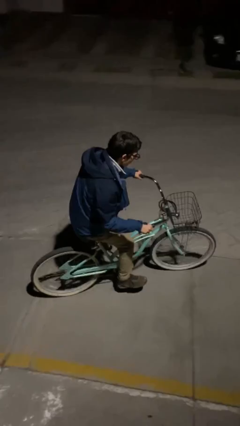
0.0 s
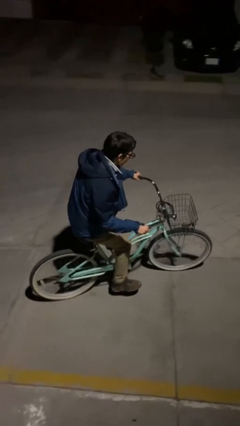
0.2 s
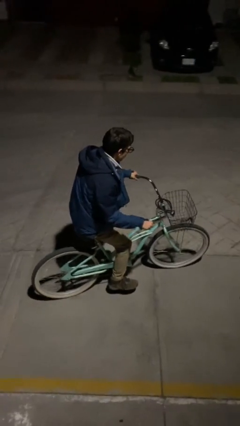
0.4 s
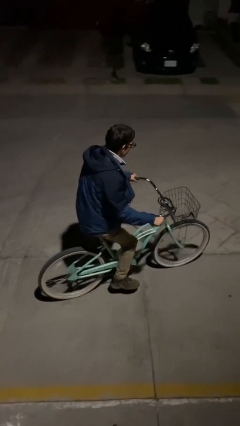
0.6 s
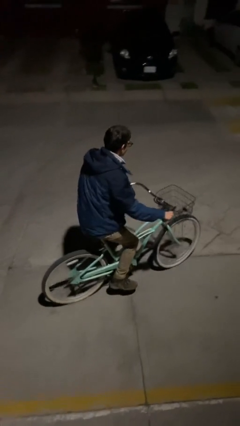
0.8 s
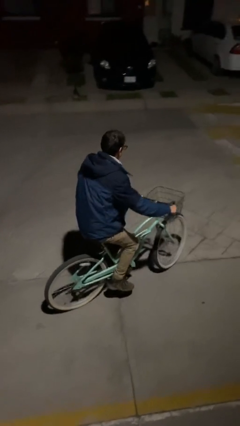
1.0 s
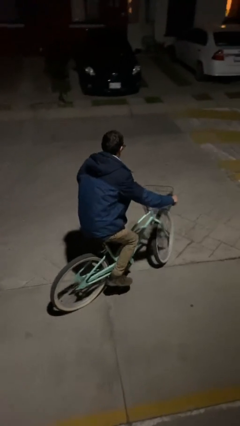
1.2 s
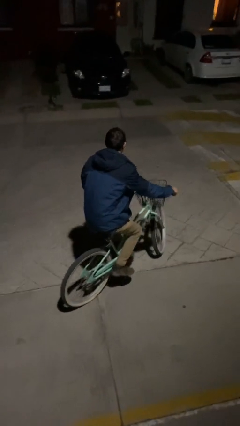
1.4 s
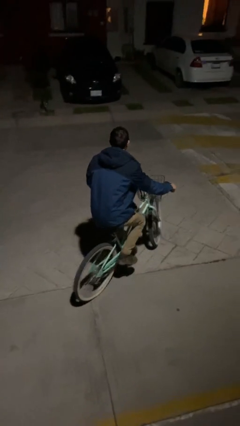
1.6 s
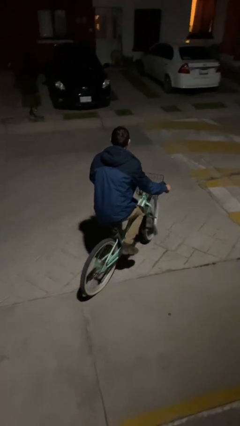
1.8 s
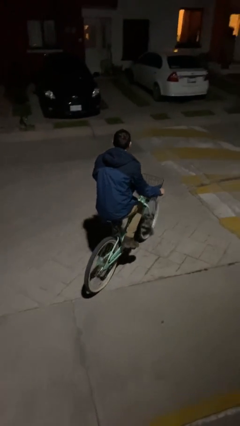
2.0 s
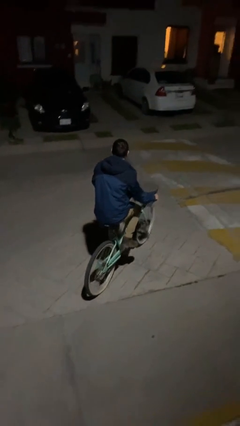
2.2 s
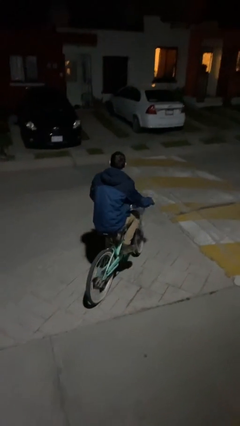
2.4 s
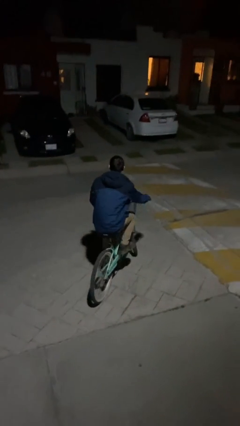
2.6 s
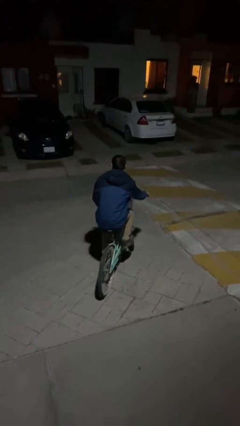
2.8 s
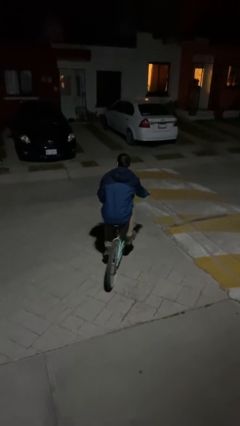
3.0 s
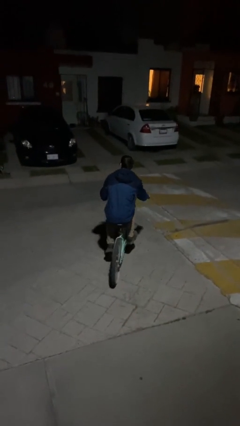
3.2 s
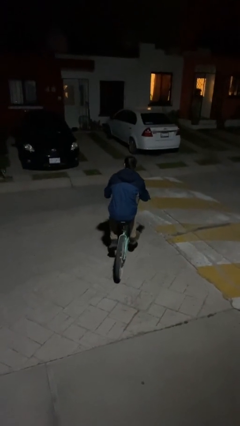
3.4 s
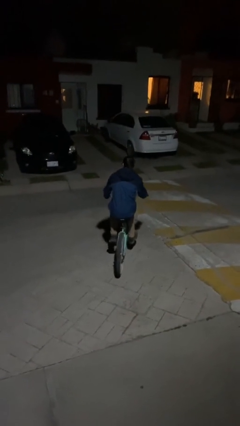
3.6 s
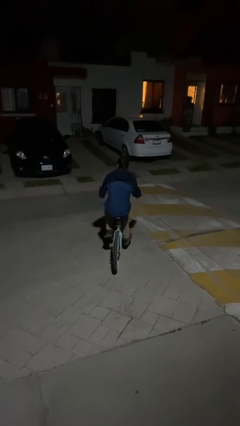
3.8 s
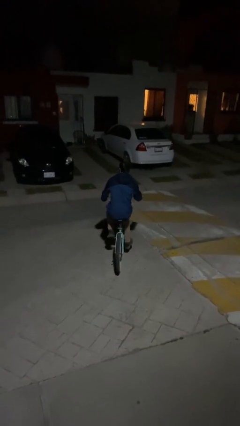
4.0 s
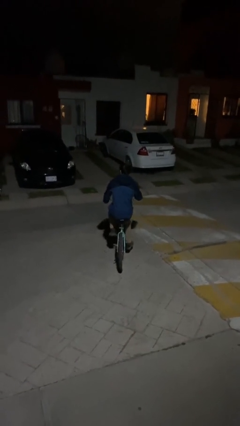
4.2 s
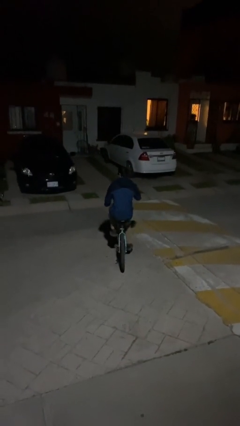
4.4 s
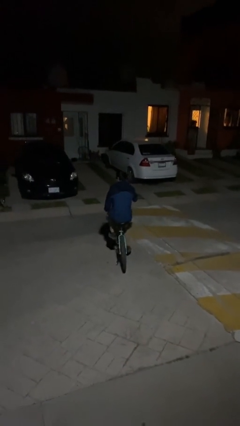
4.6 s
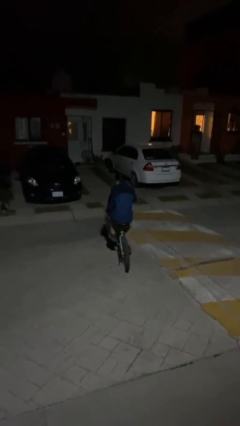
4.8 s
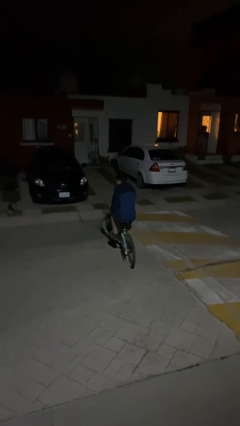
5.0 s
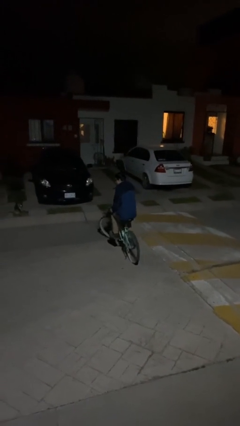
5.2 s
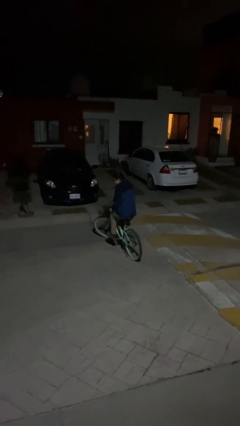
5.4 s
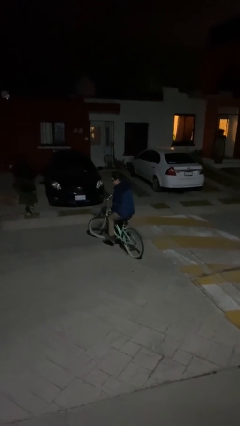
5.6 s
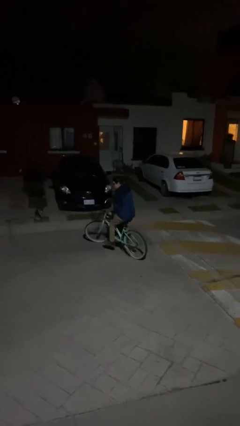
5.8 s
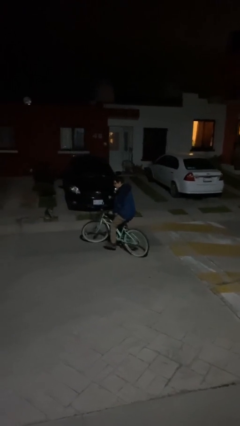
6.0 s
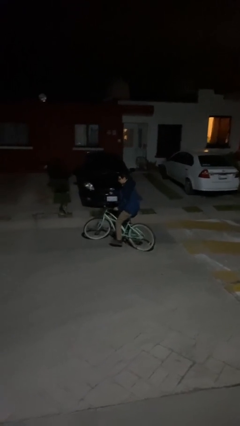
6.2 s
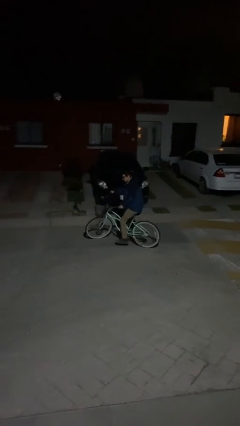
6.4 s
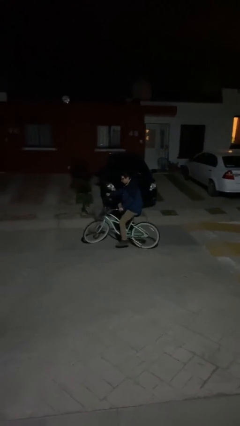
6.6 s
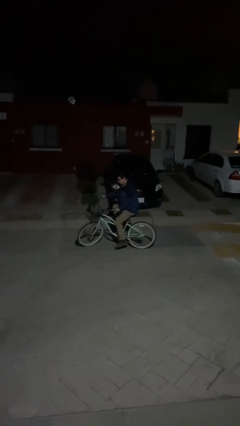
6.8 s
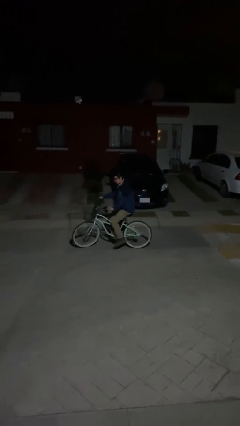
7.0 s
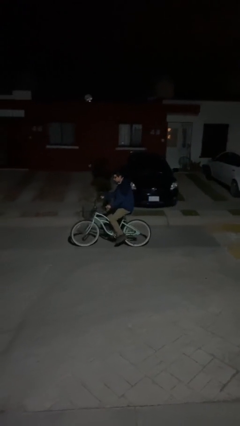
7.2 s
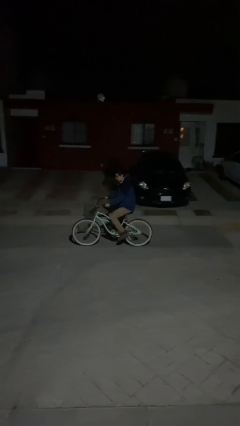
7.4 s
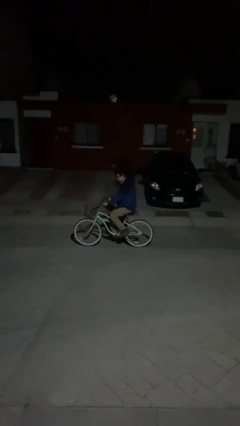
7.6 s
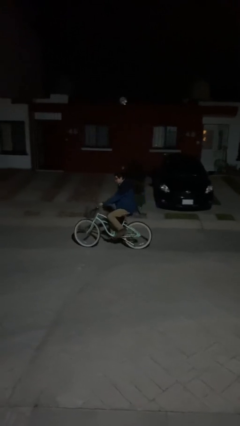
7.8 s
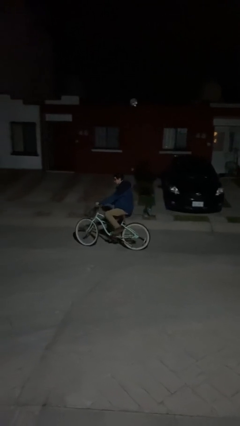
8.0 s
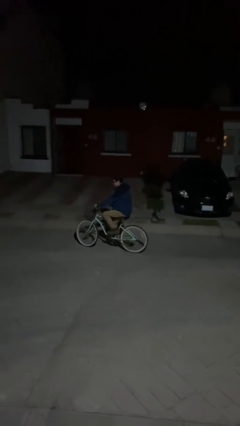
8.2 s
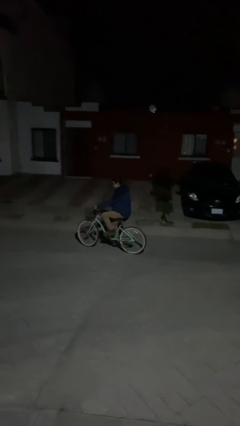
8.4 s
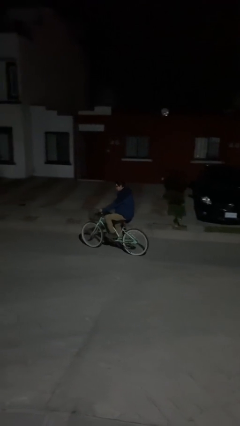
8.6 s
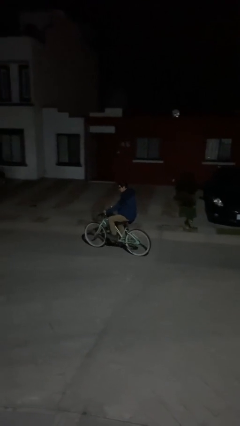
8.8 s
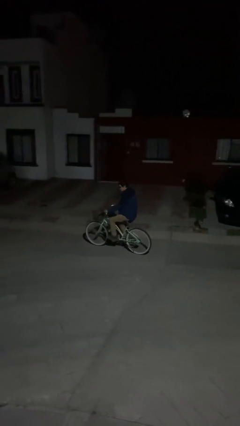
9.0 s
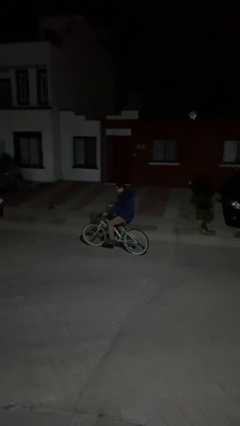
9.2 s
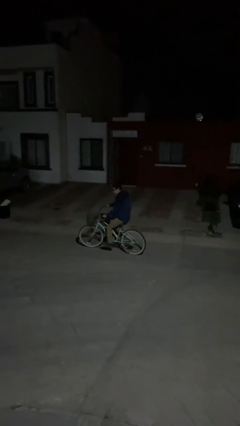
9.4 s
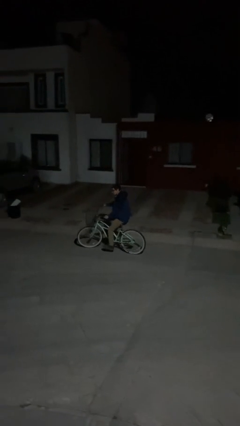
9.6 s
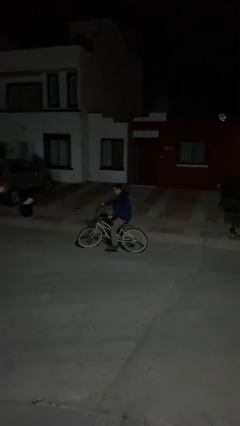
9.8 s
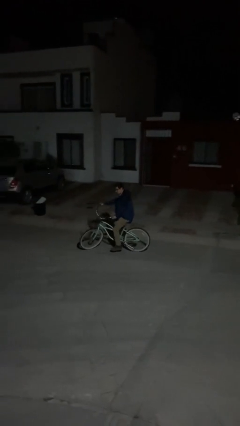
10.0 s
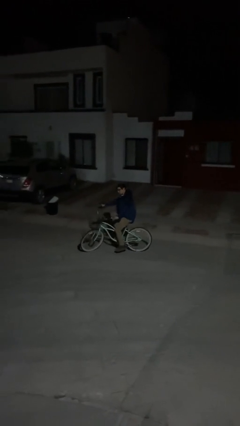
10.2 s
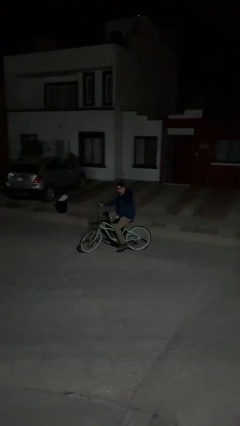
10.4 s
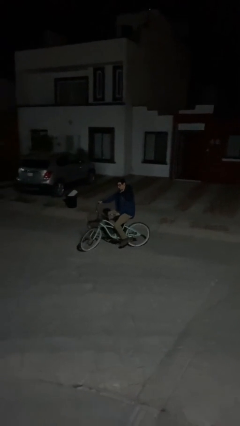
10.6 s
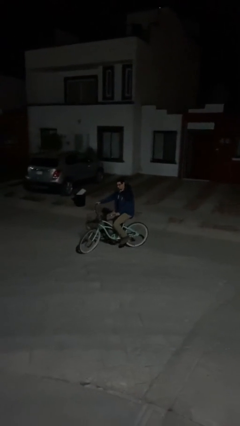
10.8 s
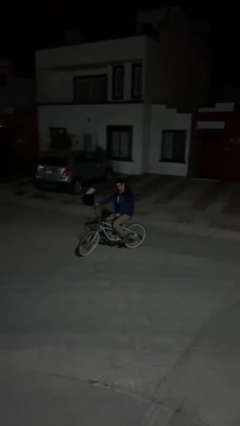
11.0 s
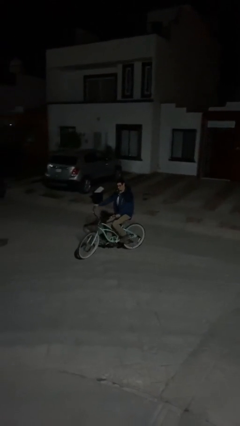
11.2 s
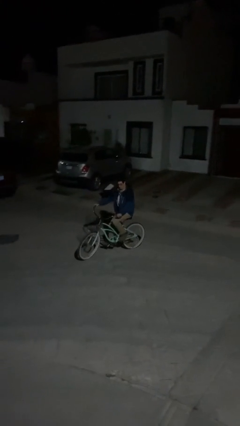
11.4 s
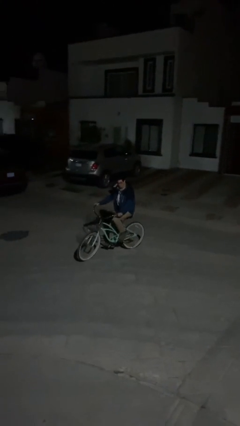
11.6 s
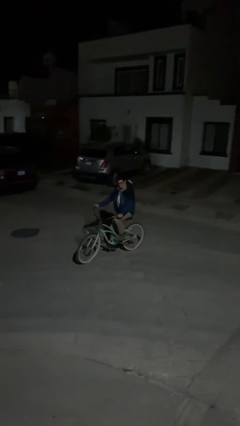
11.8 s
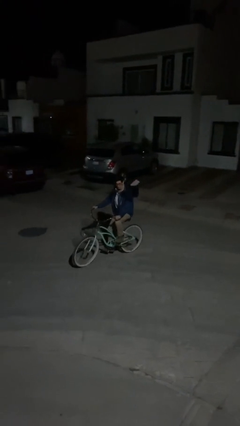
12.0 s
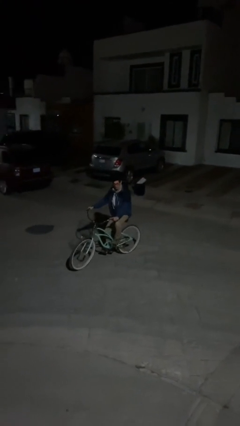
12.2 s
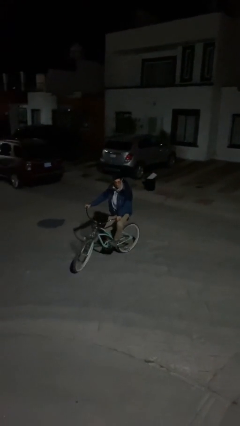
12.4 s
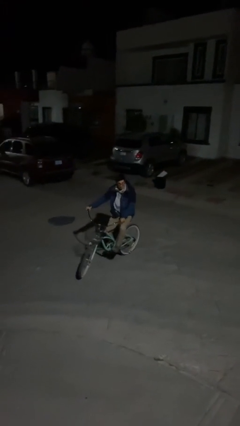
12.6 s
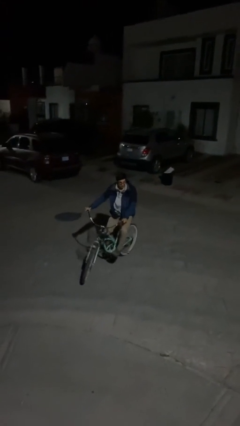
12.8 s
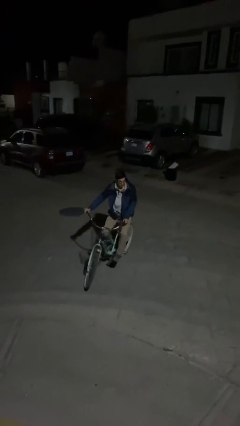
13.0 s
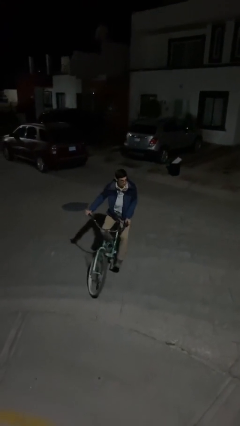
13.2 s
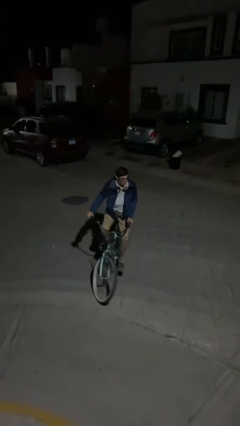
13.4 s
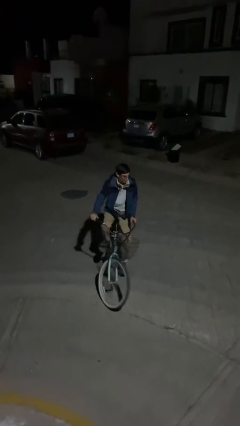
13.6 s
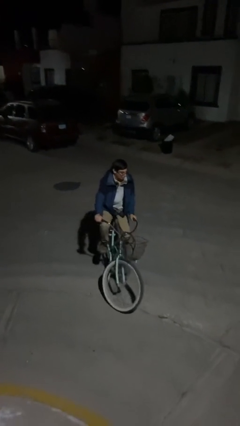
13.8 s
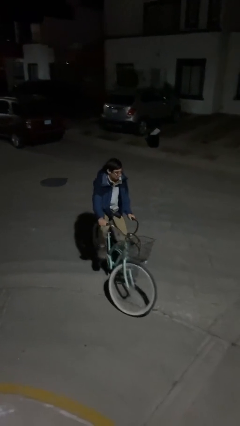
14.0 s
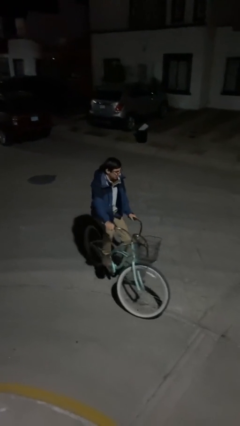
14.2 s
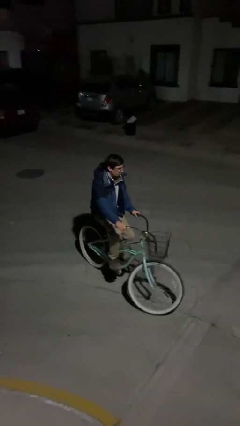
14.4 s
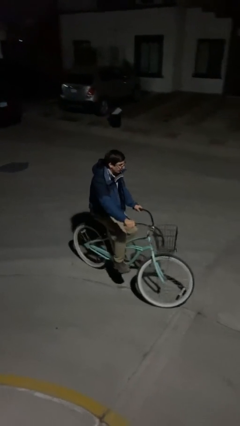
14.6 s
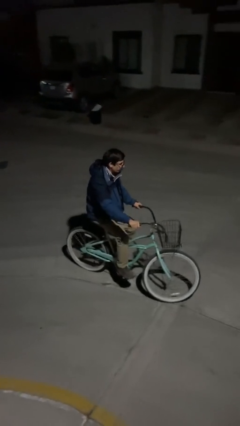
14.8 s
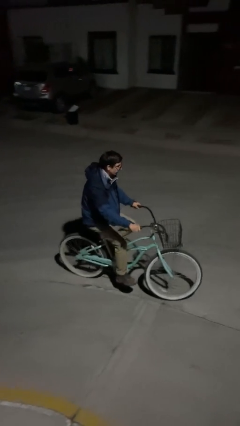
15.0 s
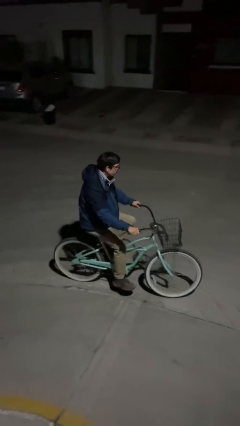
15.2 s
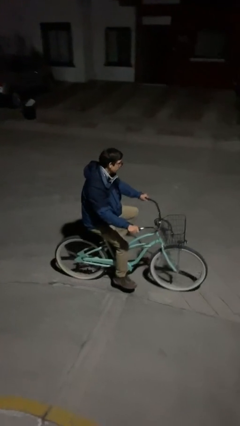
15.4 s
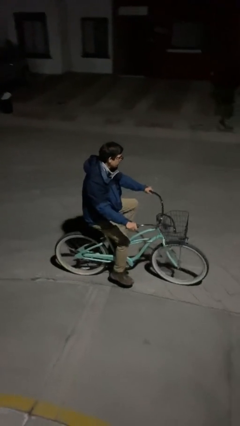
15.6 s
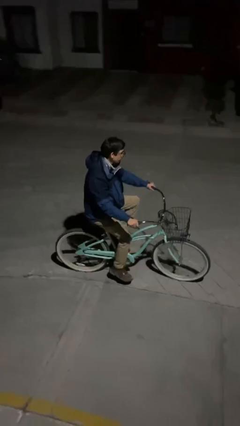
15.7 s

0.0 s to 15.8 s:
person rides bicycle

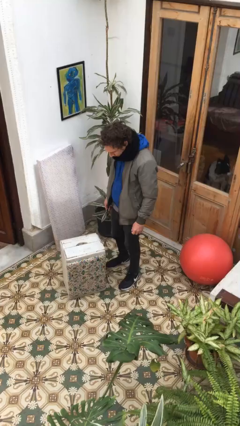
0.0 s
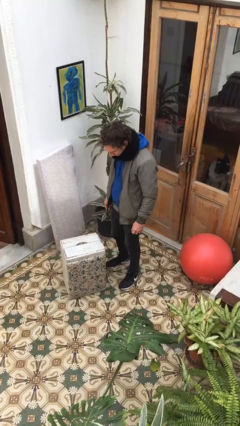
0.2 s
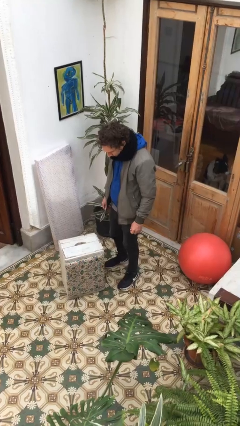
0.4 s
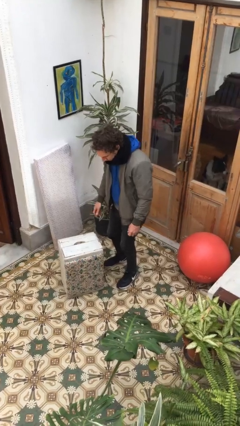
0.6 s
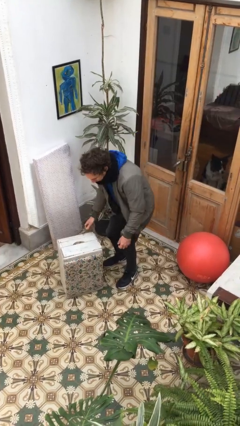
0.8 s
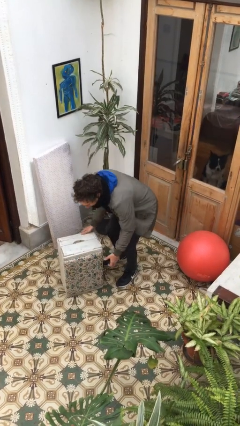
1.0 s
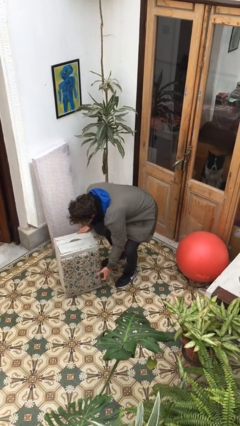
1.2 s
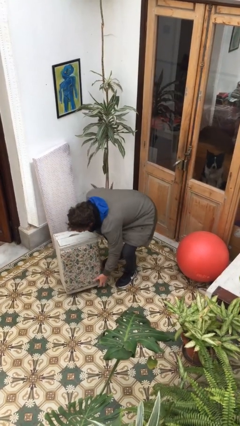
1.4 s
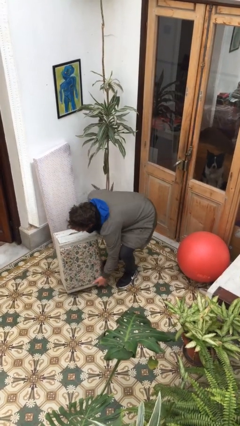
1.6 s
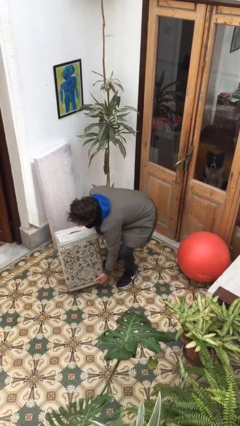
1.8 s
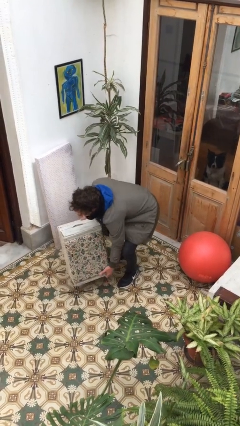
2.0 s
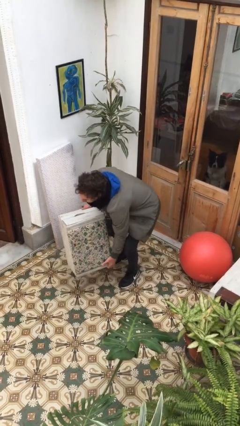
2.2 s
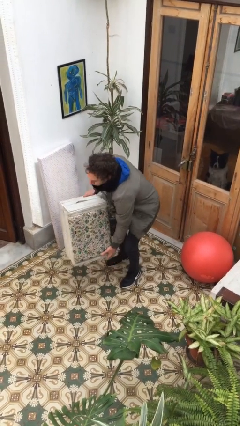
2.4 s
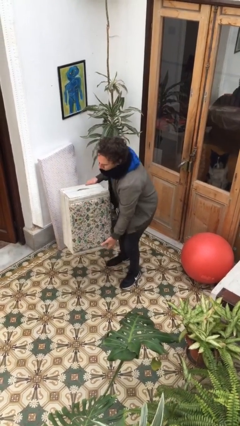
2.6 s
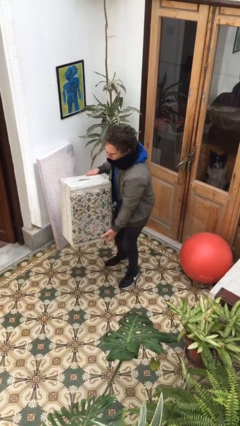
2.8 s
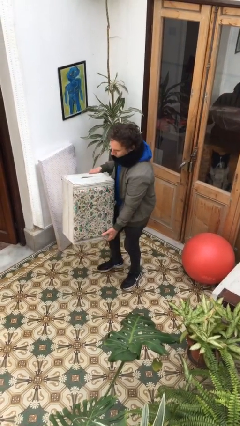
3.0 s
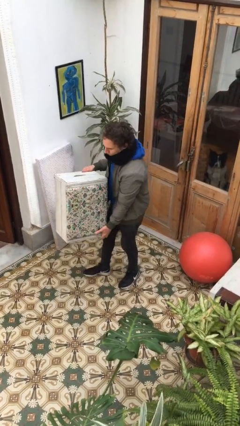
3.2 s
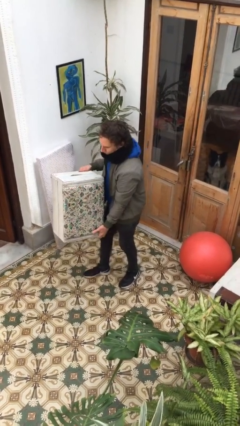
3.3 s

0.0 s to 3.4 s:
person picks up object from floor
